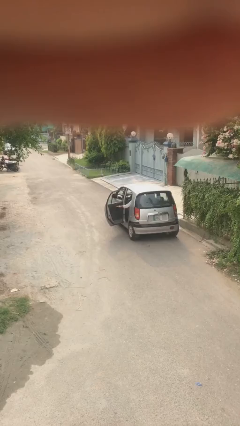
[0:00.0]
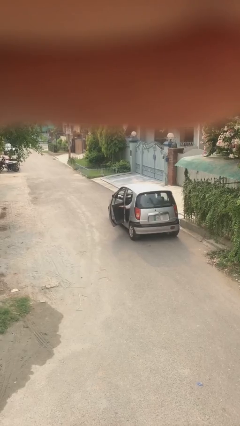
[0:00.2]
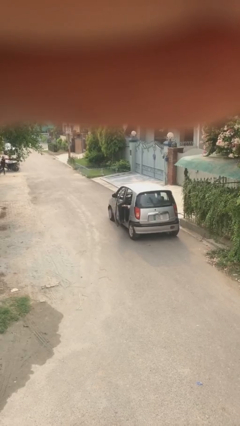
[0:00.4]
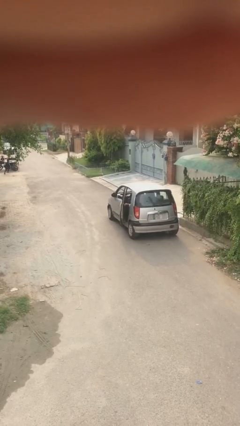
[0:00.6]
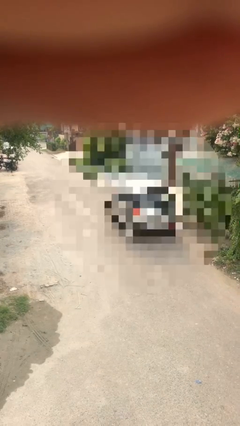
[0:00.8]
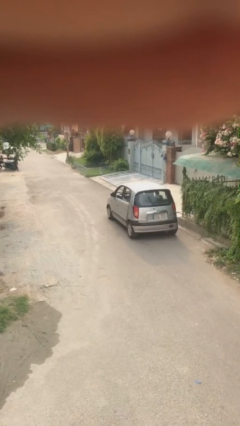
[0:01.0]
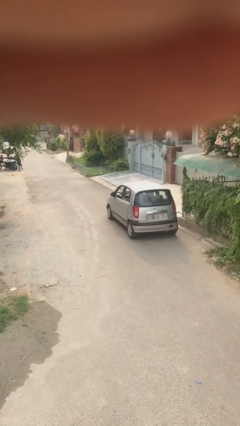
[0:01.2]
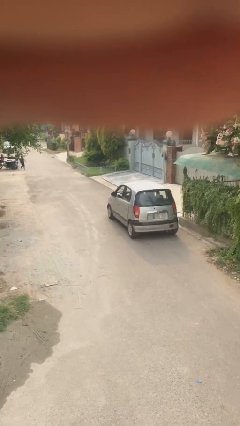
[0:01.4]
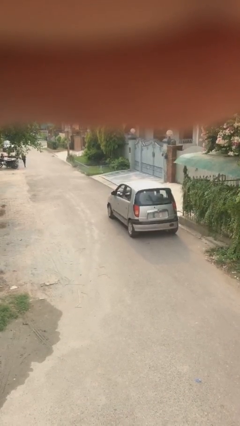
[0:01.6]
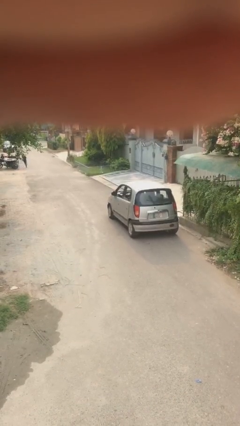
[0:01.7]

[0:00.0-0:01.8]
person closes car door

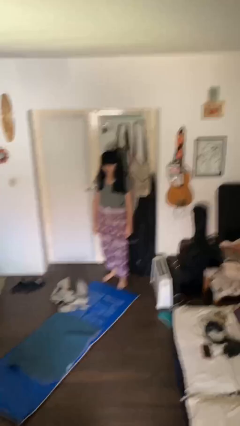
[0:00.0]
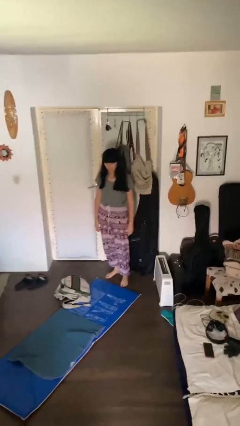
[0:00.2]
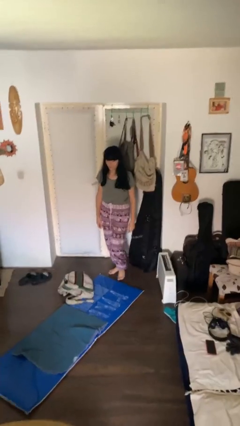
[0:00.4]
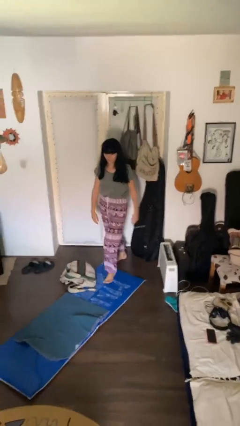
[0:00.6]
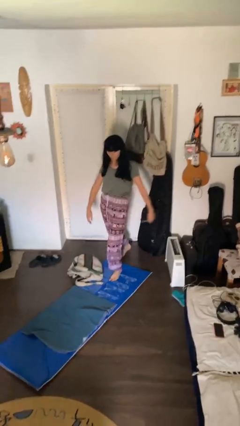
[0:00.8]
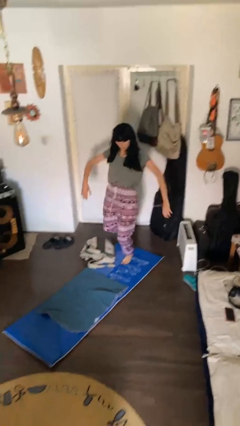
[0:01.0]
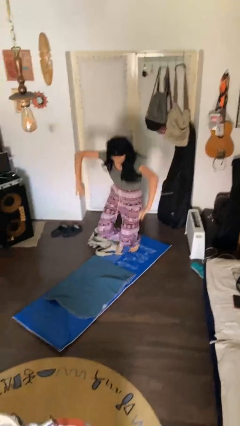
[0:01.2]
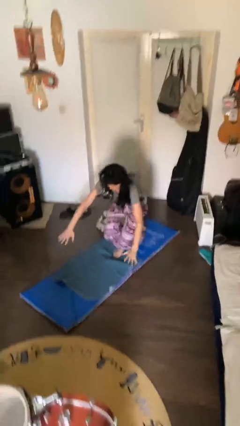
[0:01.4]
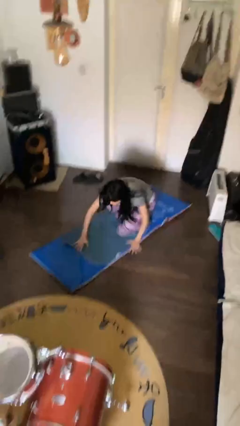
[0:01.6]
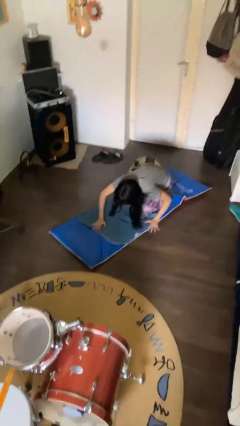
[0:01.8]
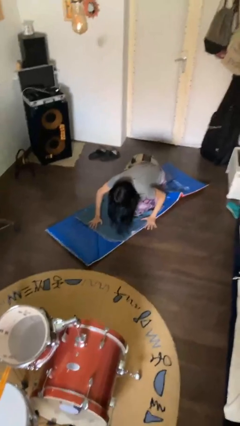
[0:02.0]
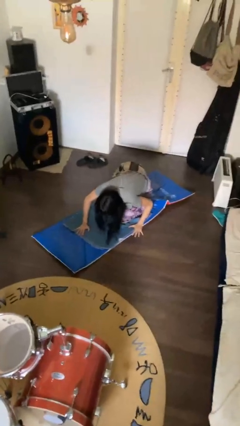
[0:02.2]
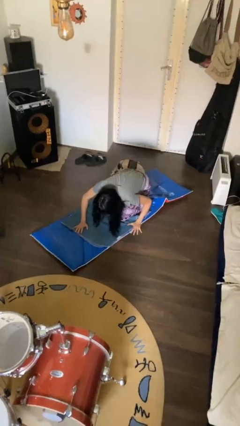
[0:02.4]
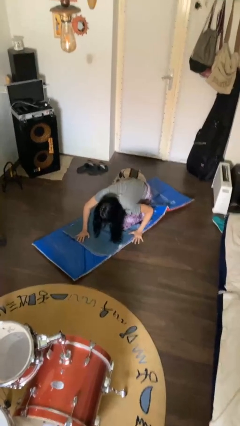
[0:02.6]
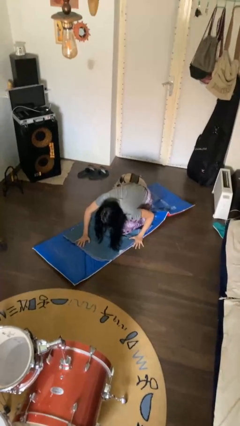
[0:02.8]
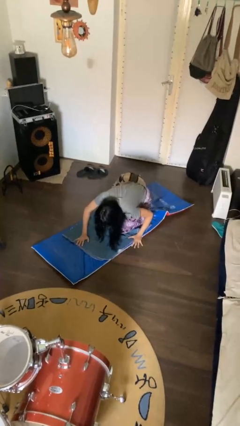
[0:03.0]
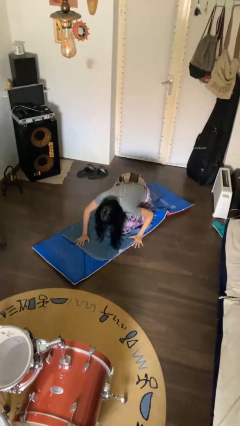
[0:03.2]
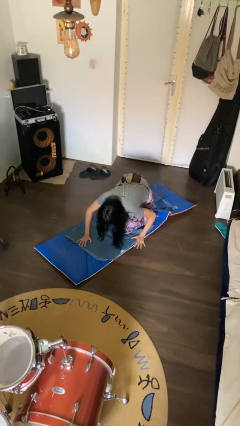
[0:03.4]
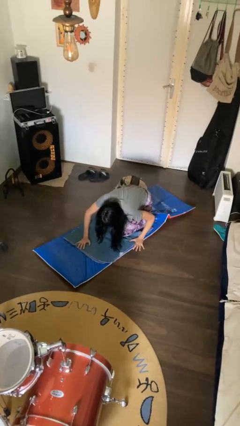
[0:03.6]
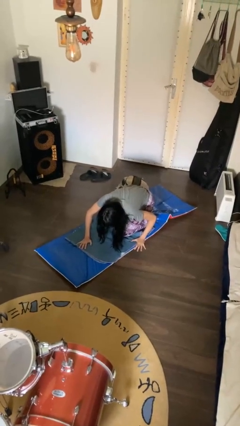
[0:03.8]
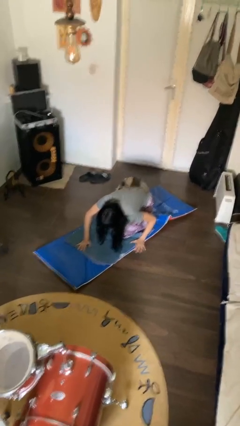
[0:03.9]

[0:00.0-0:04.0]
person trips on object on floor

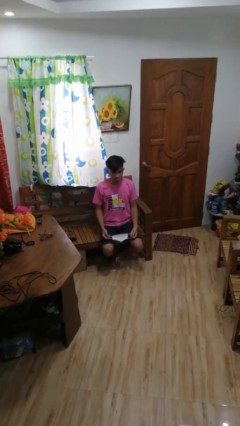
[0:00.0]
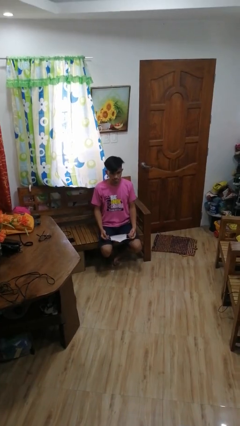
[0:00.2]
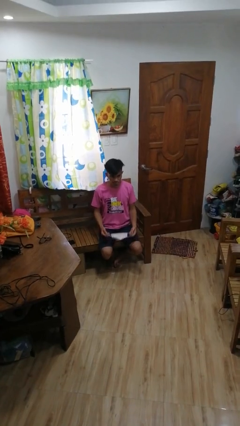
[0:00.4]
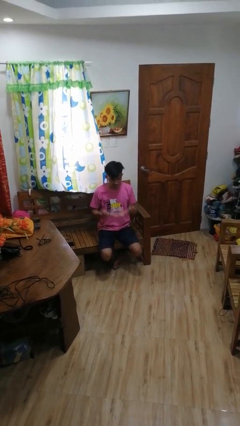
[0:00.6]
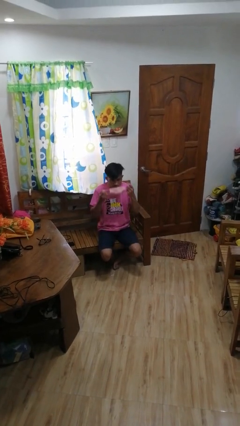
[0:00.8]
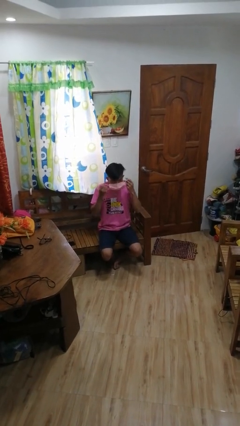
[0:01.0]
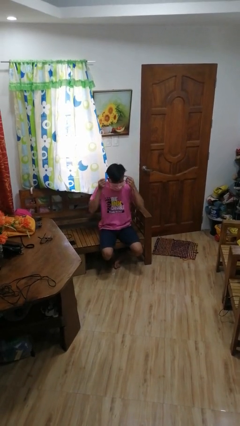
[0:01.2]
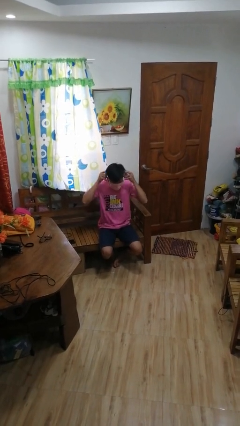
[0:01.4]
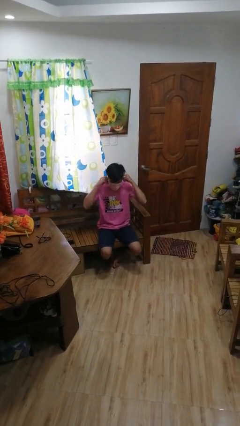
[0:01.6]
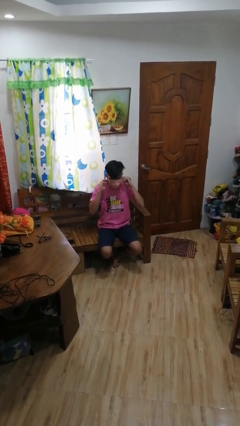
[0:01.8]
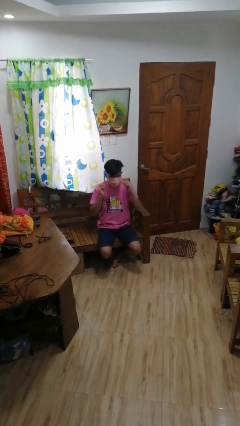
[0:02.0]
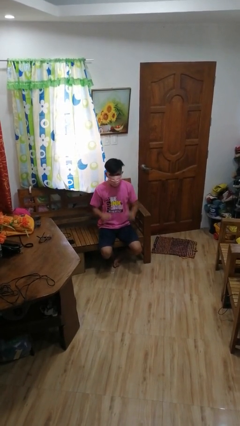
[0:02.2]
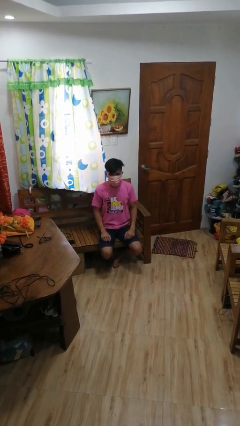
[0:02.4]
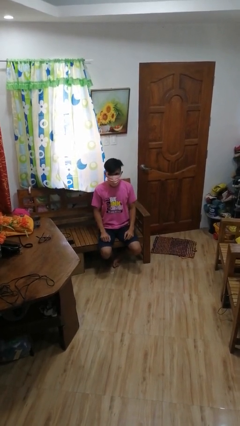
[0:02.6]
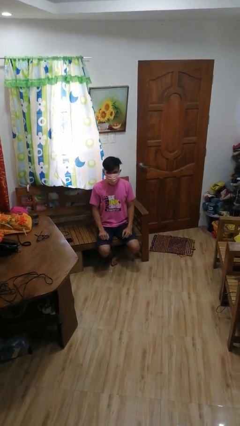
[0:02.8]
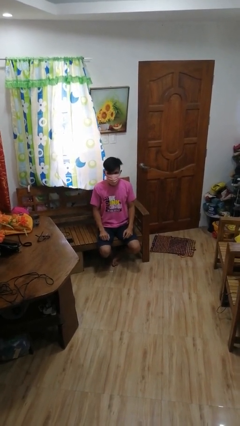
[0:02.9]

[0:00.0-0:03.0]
person puts on facemask

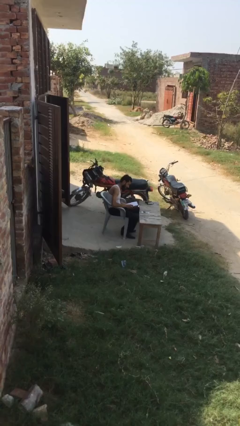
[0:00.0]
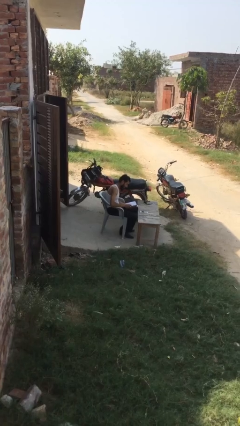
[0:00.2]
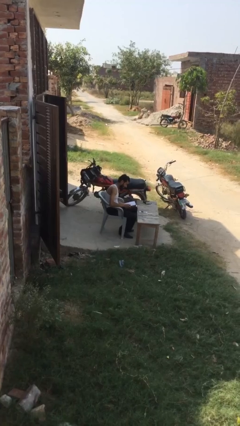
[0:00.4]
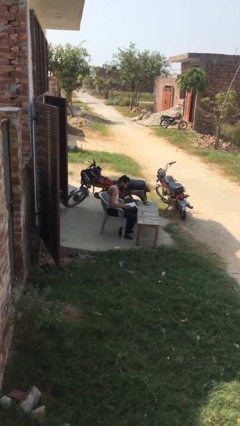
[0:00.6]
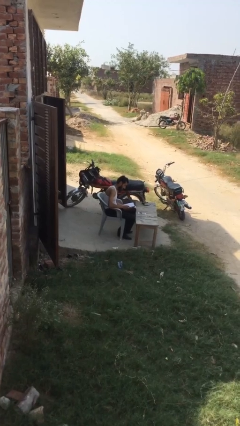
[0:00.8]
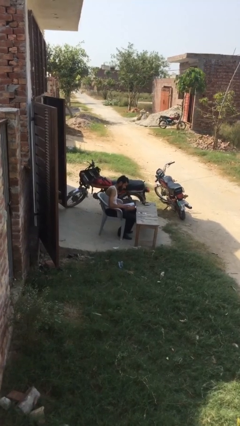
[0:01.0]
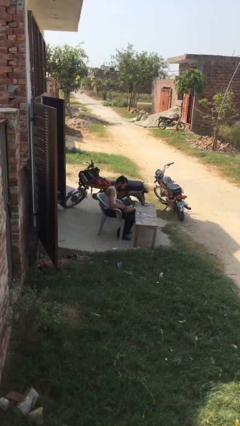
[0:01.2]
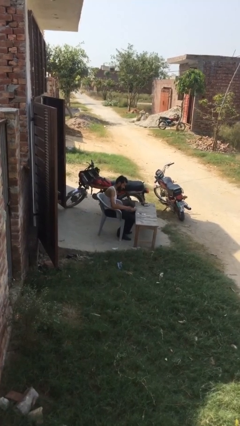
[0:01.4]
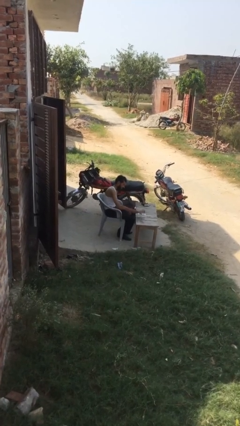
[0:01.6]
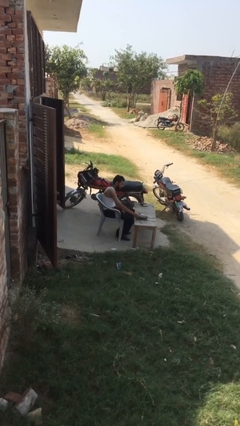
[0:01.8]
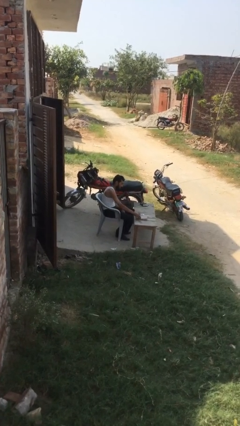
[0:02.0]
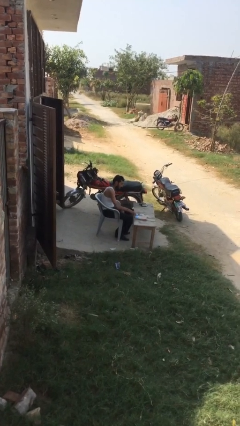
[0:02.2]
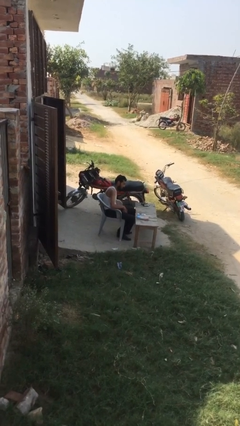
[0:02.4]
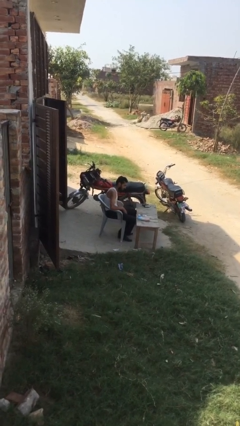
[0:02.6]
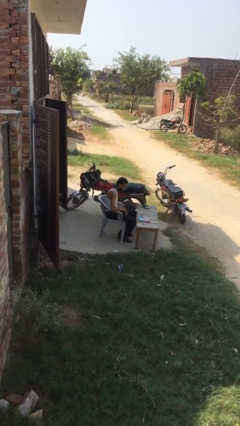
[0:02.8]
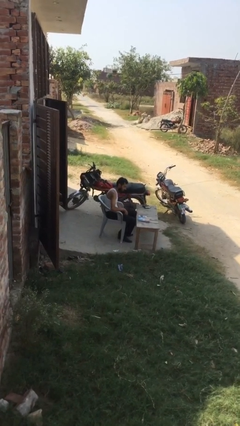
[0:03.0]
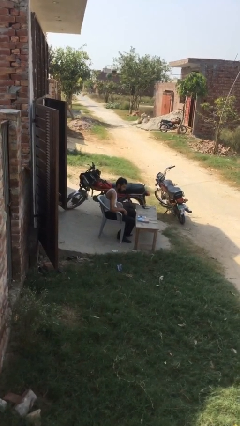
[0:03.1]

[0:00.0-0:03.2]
person puts down object on table

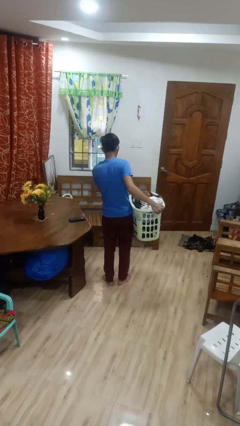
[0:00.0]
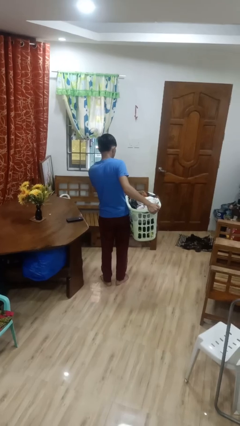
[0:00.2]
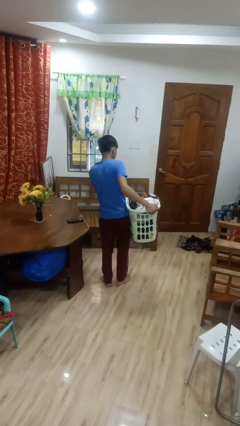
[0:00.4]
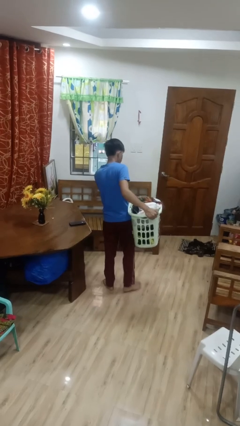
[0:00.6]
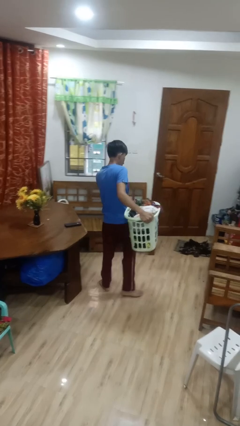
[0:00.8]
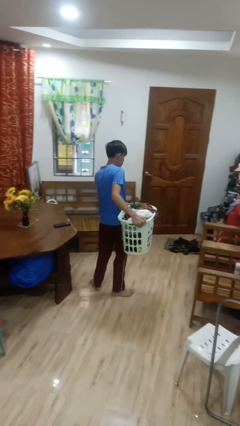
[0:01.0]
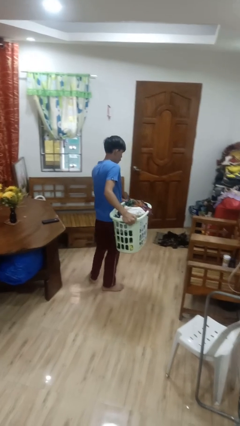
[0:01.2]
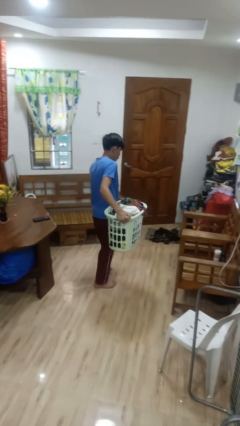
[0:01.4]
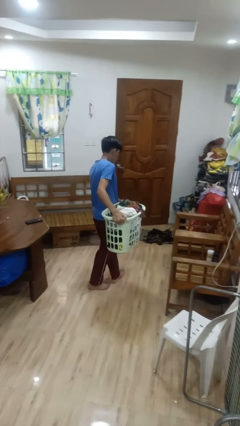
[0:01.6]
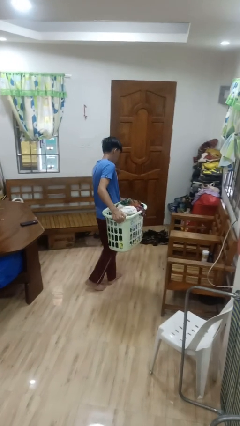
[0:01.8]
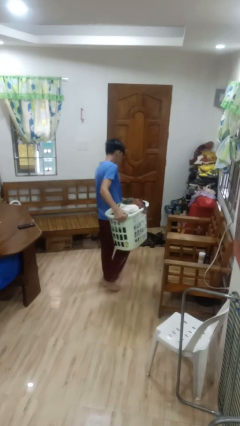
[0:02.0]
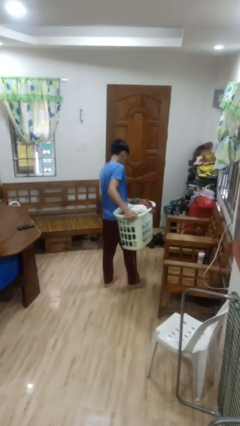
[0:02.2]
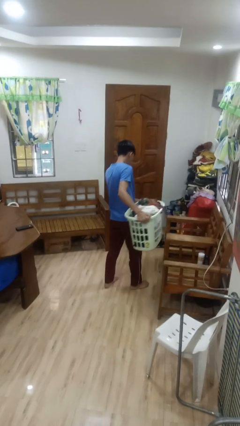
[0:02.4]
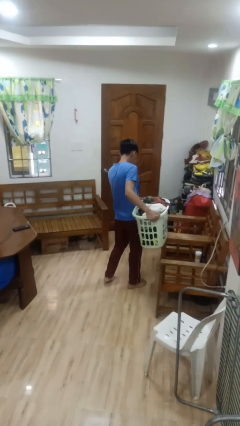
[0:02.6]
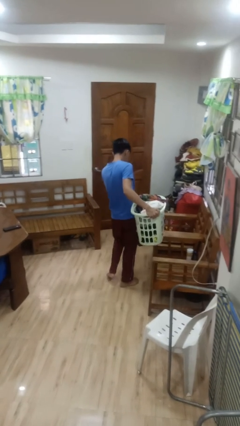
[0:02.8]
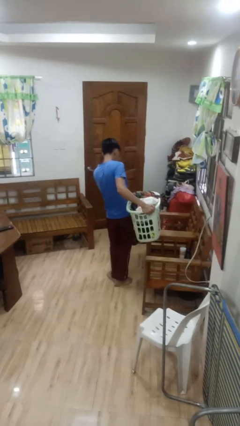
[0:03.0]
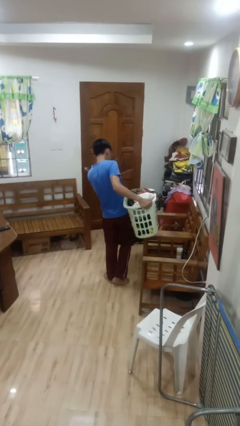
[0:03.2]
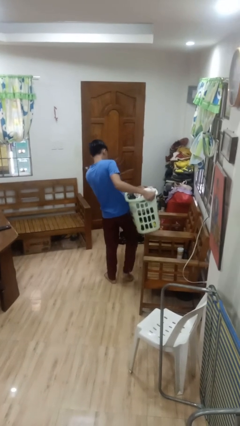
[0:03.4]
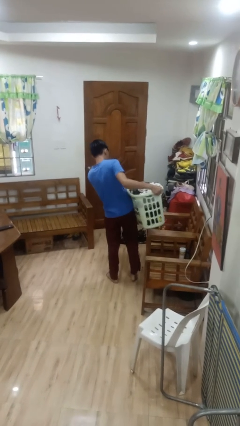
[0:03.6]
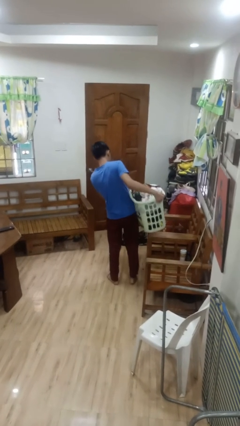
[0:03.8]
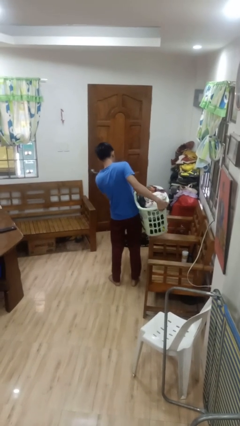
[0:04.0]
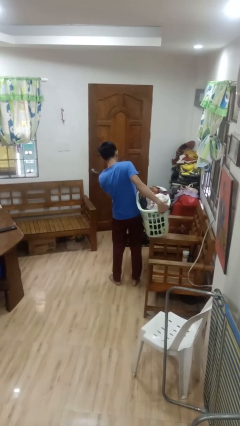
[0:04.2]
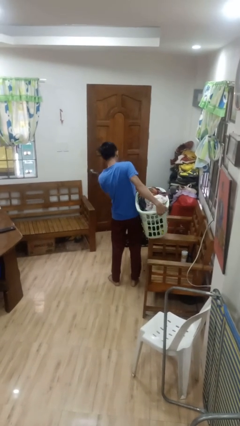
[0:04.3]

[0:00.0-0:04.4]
person carries laundry basket

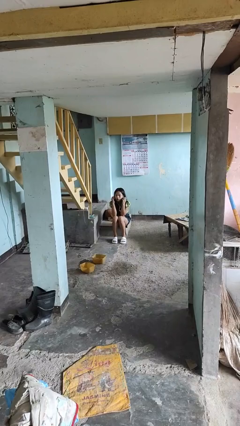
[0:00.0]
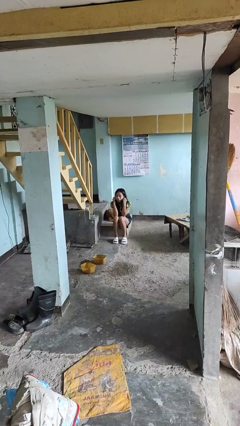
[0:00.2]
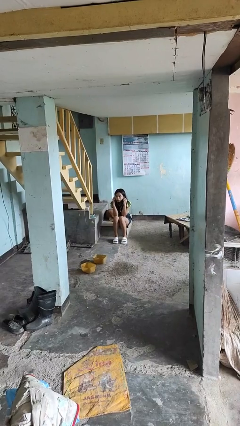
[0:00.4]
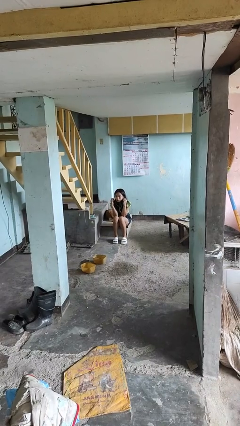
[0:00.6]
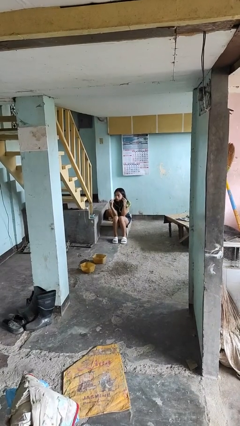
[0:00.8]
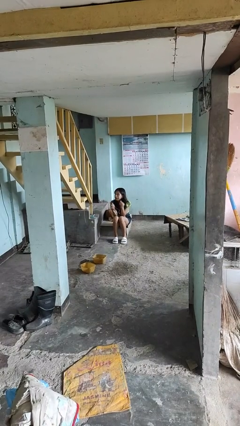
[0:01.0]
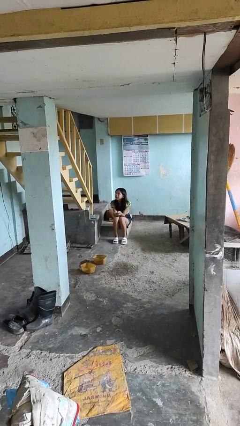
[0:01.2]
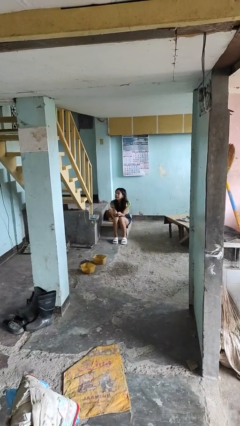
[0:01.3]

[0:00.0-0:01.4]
person takes off headphones
